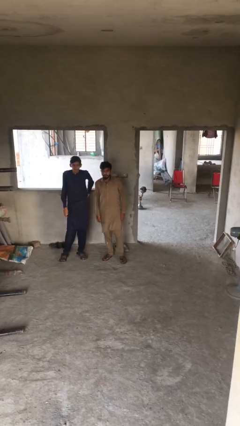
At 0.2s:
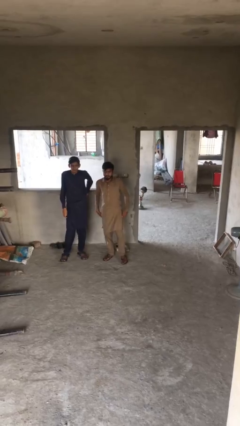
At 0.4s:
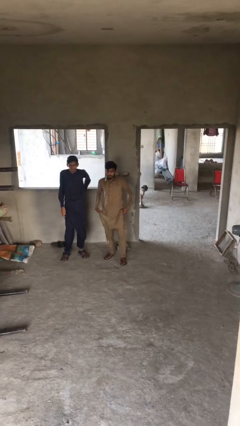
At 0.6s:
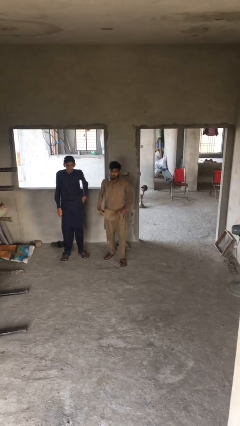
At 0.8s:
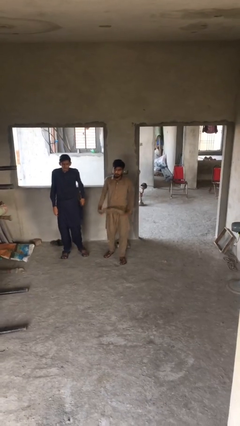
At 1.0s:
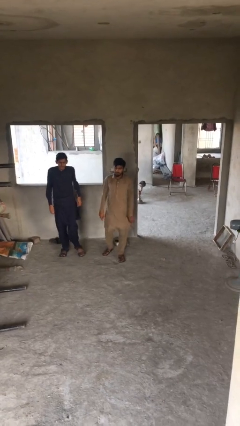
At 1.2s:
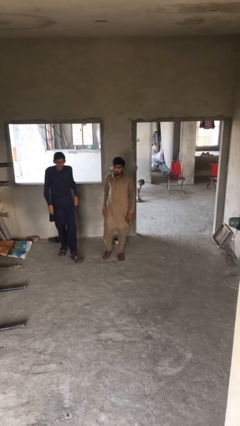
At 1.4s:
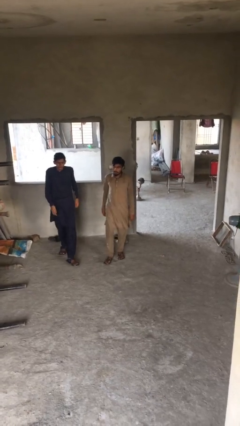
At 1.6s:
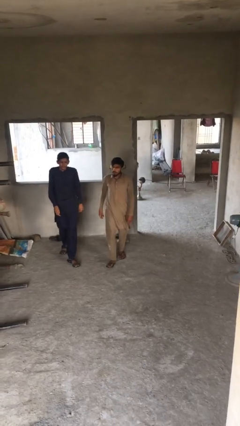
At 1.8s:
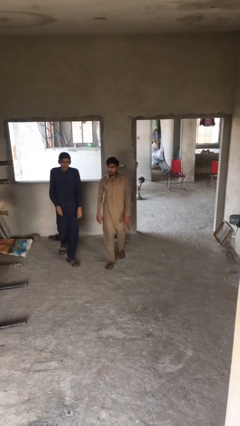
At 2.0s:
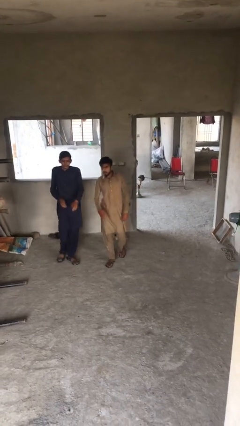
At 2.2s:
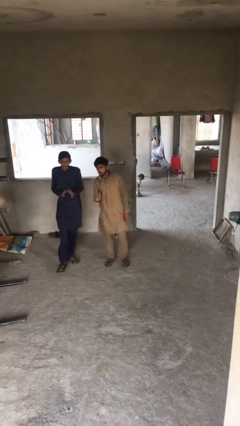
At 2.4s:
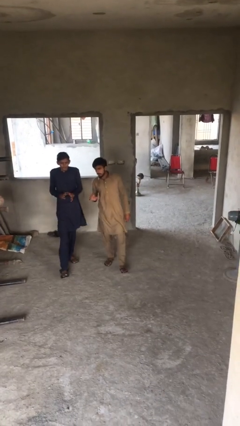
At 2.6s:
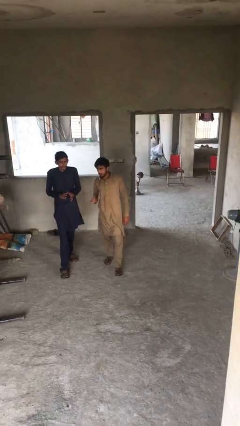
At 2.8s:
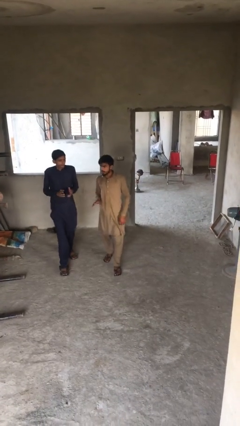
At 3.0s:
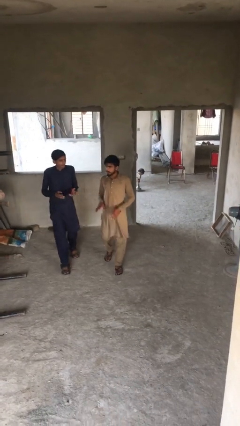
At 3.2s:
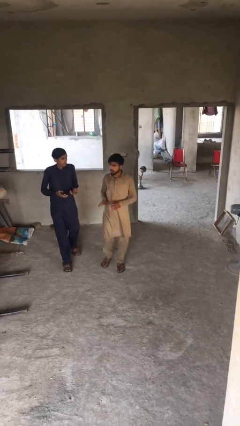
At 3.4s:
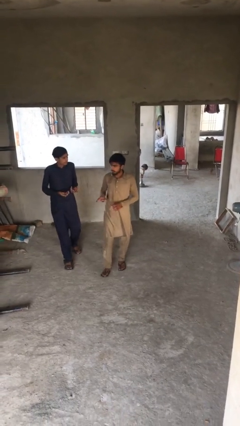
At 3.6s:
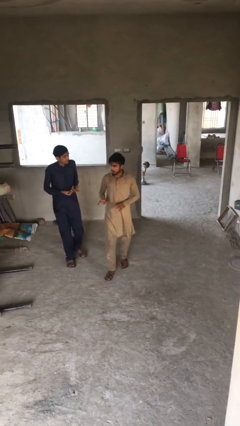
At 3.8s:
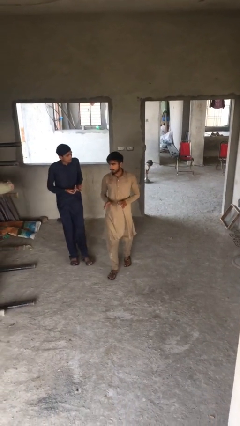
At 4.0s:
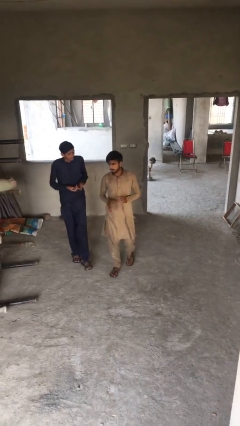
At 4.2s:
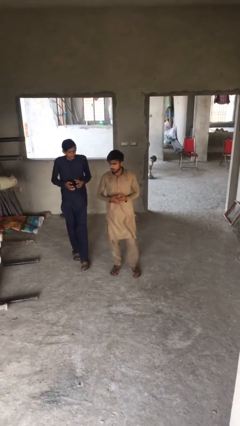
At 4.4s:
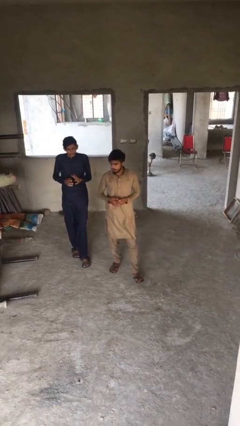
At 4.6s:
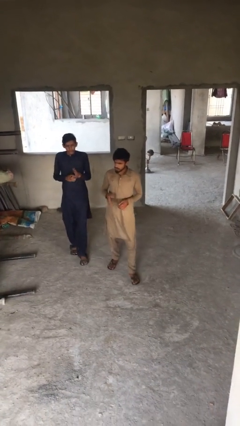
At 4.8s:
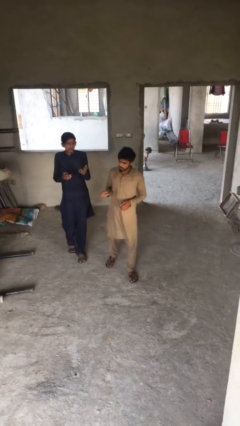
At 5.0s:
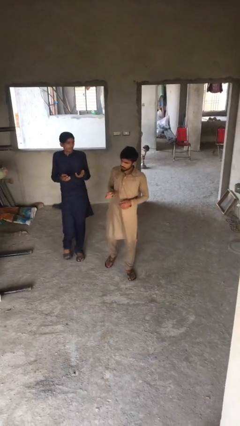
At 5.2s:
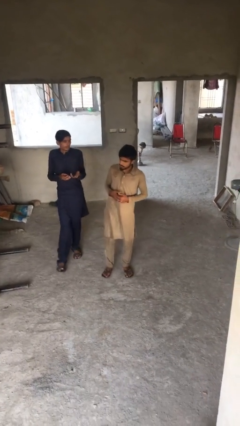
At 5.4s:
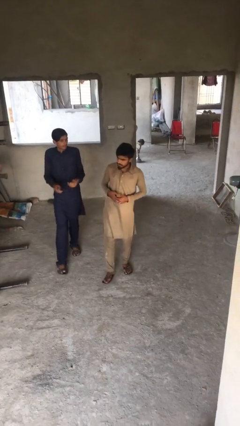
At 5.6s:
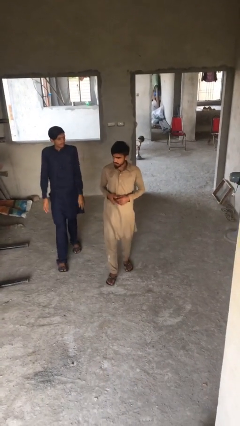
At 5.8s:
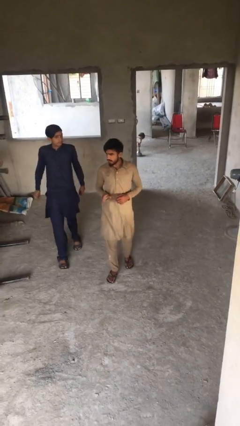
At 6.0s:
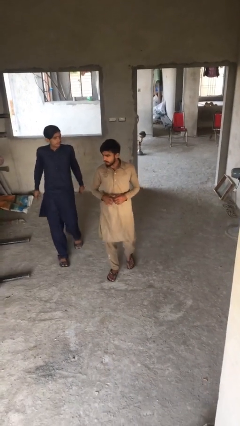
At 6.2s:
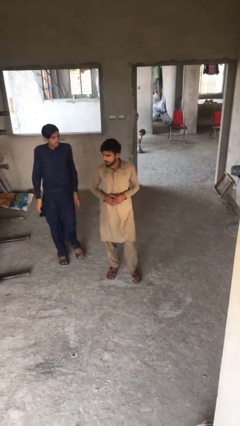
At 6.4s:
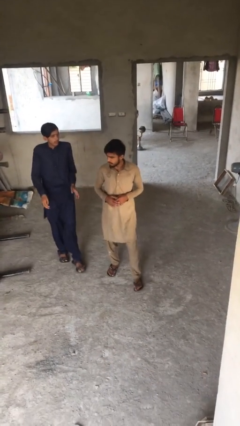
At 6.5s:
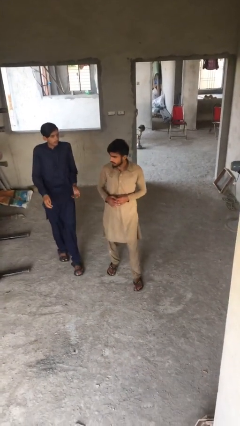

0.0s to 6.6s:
person talks to person

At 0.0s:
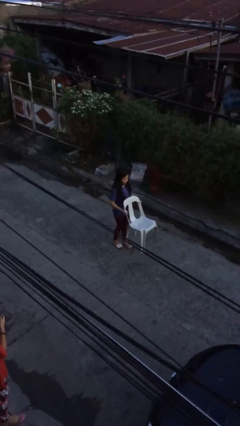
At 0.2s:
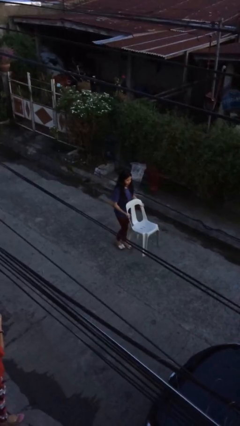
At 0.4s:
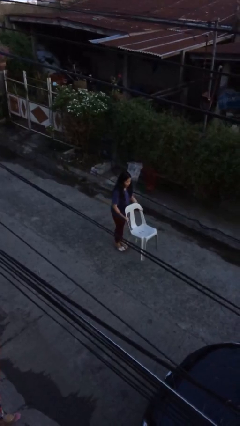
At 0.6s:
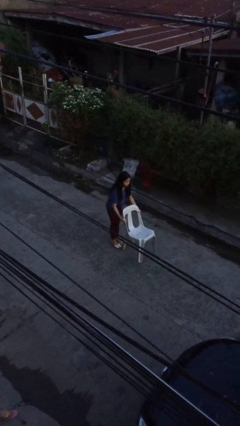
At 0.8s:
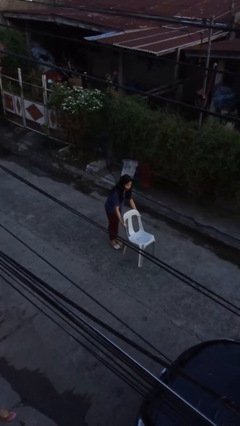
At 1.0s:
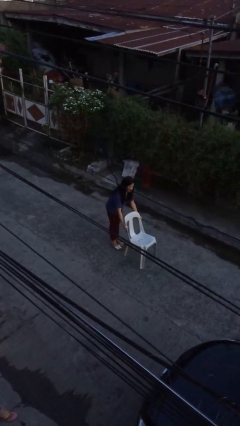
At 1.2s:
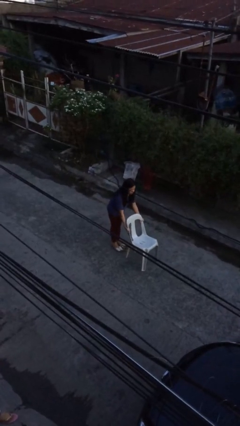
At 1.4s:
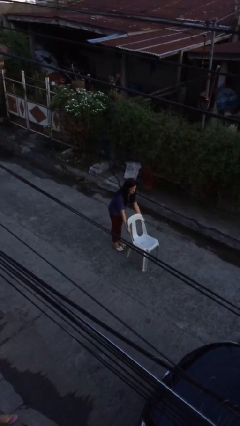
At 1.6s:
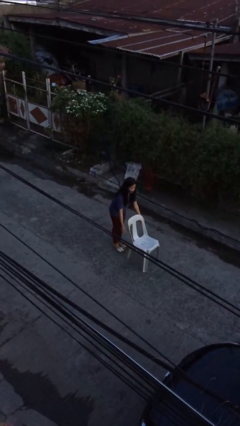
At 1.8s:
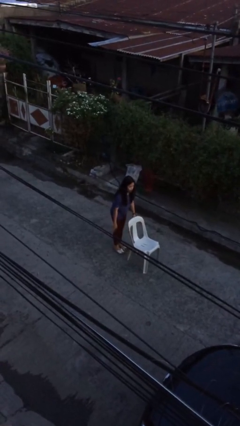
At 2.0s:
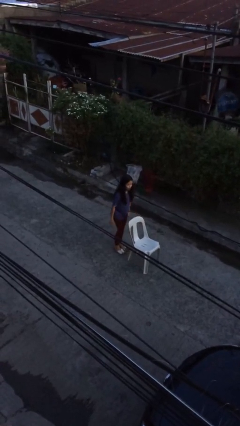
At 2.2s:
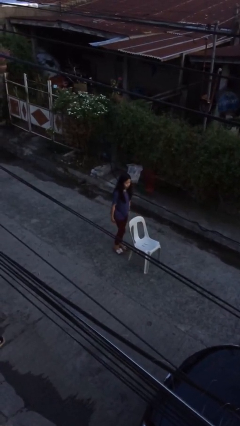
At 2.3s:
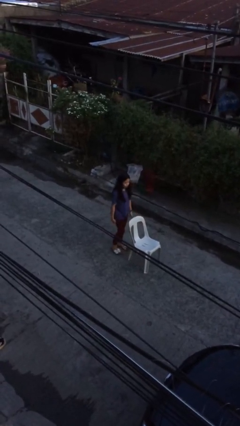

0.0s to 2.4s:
person puts down object on floor

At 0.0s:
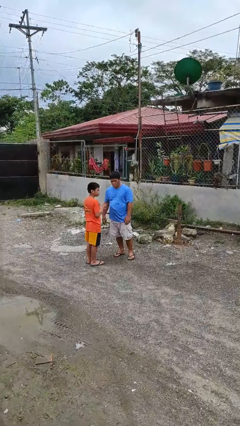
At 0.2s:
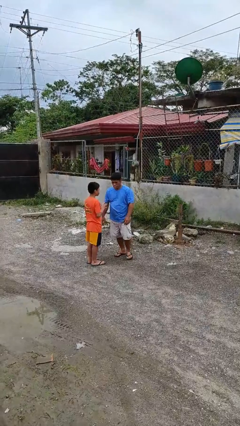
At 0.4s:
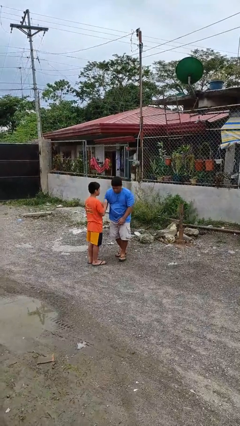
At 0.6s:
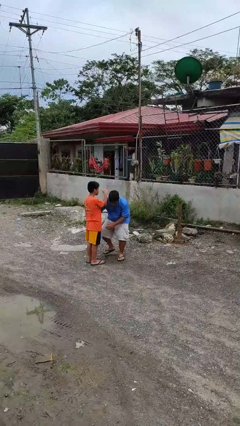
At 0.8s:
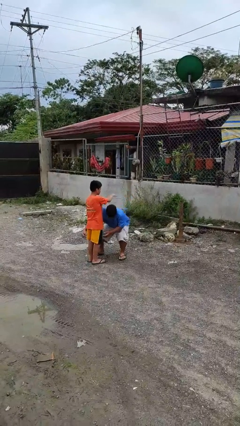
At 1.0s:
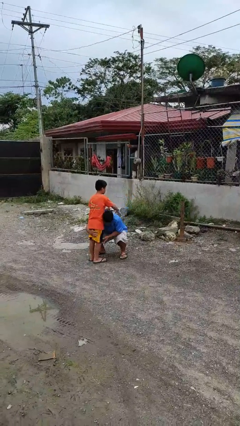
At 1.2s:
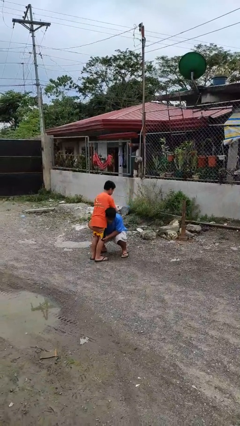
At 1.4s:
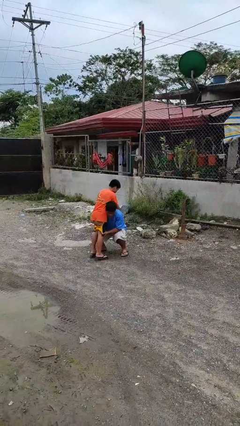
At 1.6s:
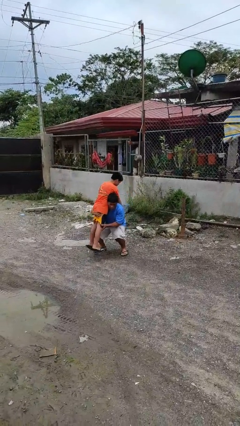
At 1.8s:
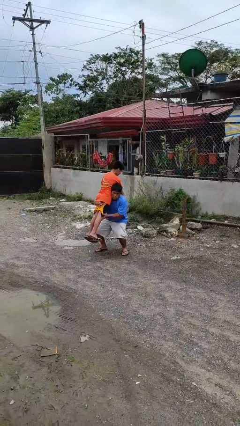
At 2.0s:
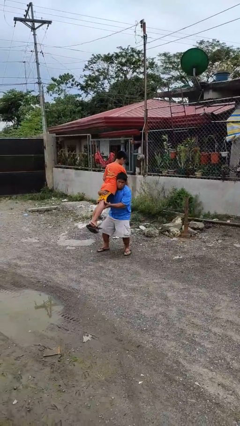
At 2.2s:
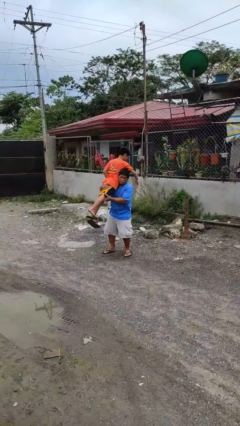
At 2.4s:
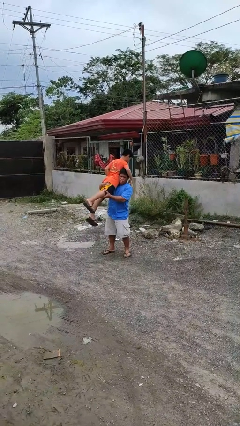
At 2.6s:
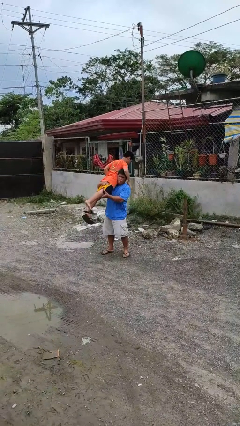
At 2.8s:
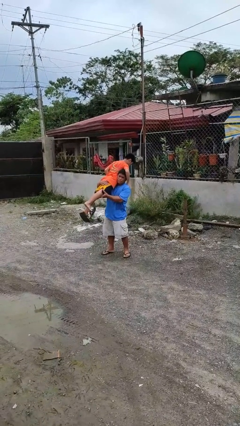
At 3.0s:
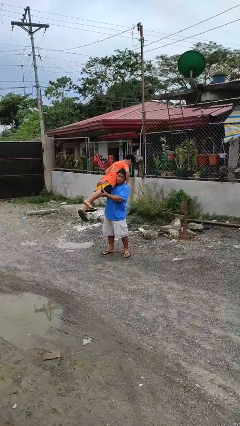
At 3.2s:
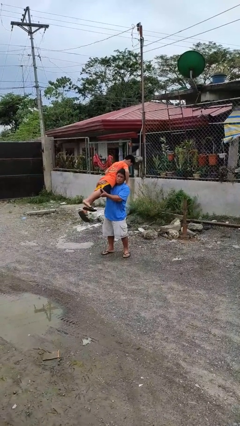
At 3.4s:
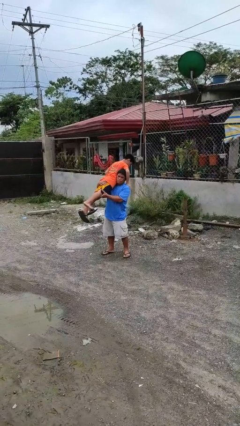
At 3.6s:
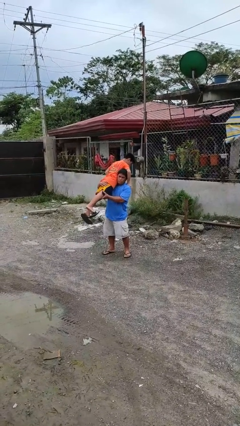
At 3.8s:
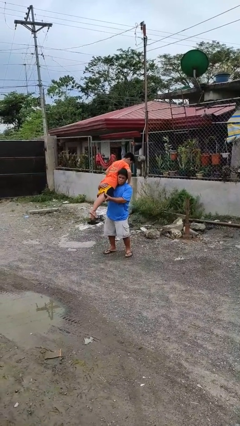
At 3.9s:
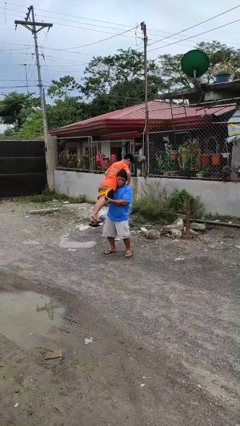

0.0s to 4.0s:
person carries person over shoulder

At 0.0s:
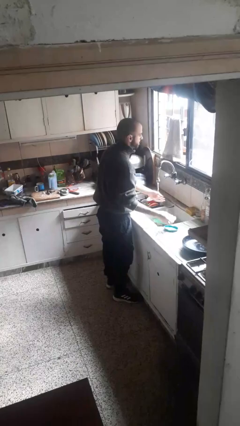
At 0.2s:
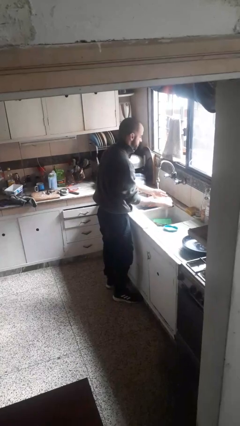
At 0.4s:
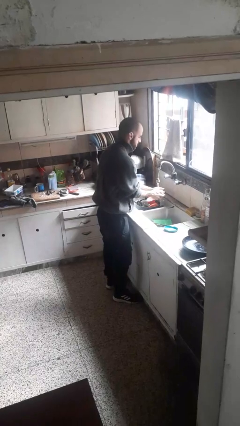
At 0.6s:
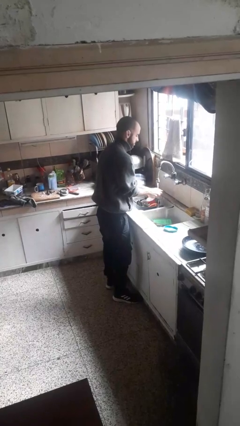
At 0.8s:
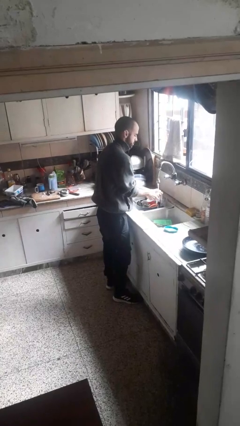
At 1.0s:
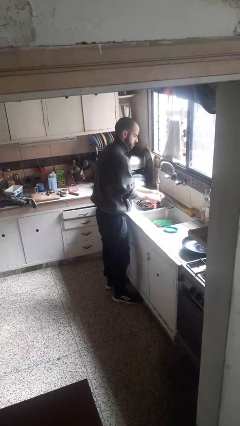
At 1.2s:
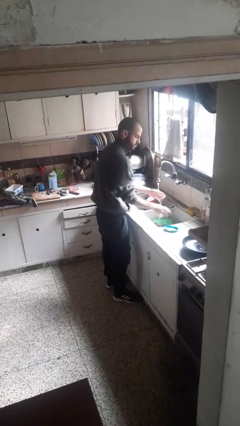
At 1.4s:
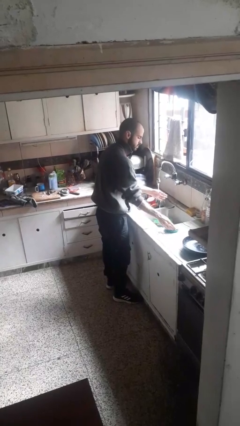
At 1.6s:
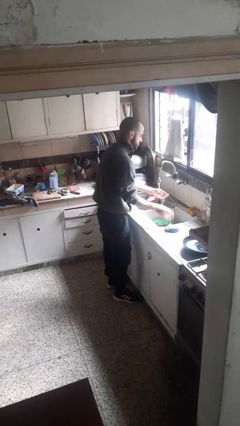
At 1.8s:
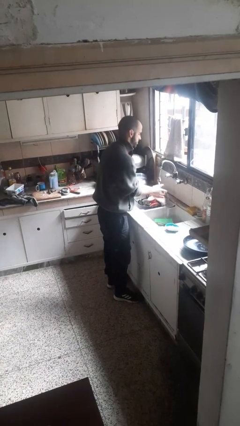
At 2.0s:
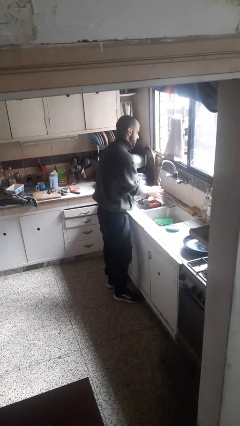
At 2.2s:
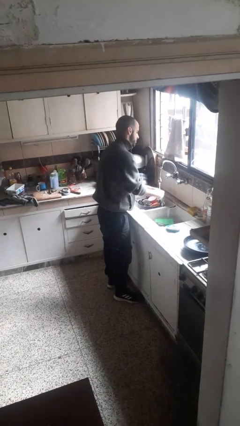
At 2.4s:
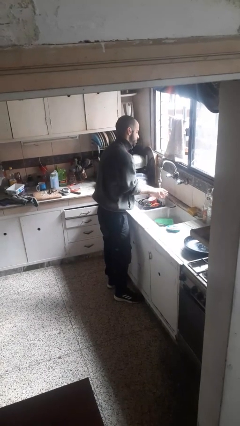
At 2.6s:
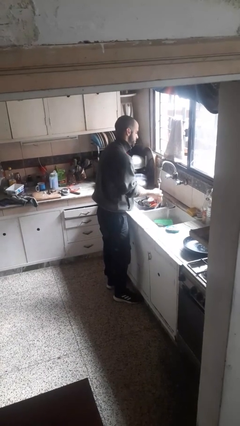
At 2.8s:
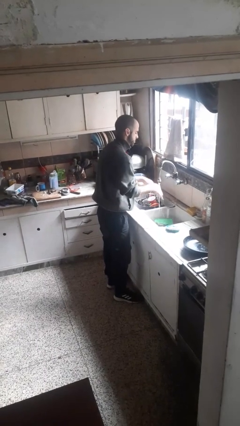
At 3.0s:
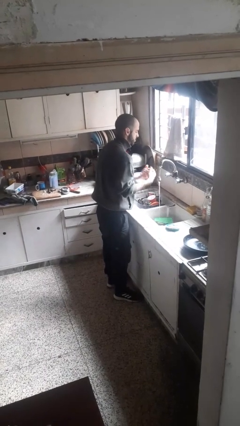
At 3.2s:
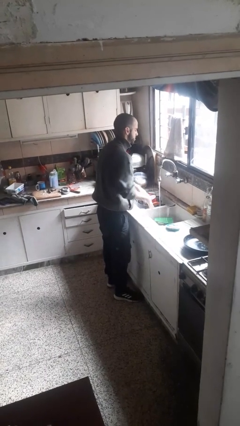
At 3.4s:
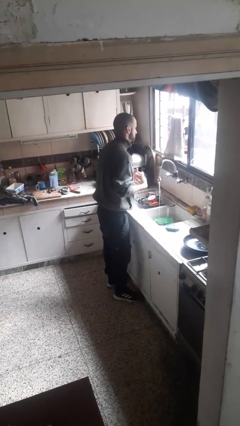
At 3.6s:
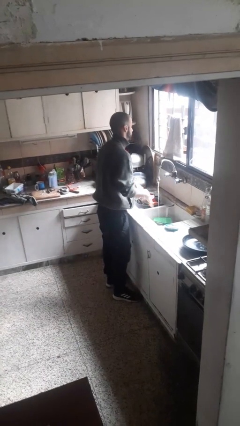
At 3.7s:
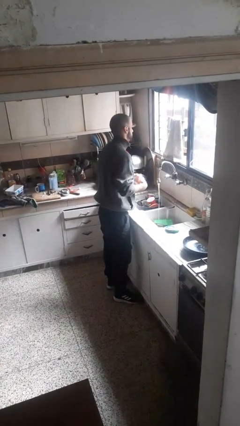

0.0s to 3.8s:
person washes hands

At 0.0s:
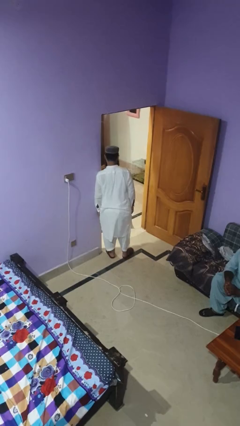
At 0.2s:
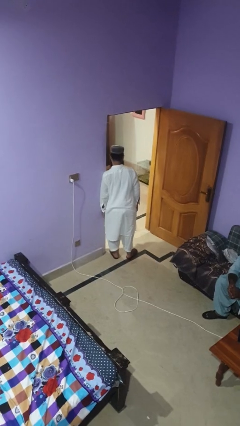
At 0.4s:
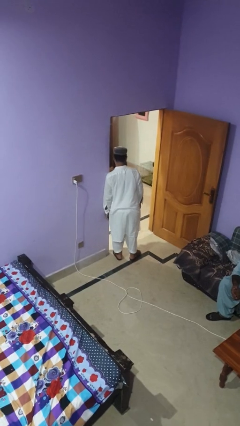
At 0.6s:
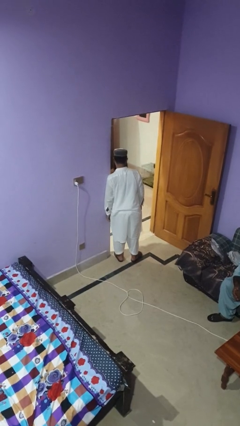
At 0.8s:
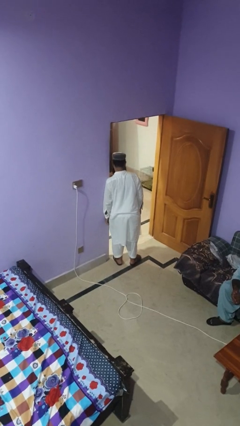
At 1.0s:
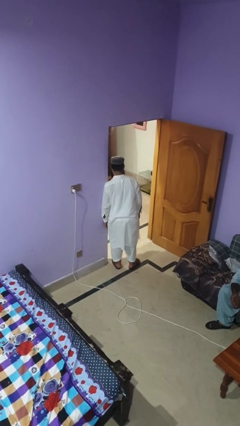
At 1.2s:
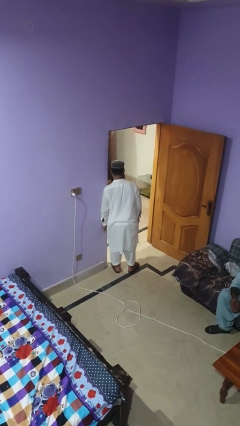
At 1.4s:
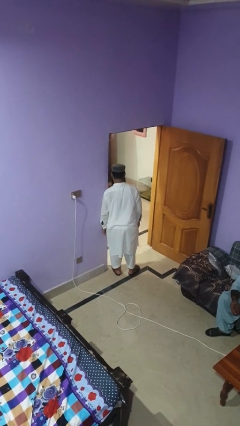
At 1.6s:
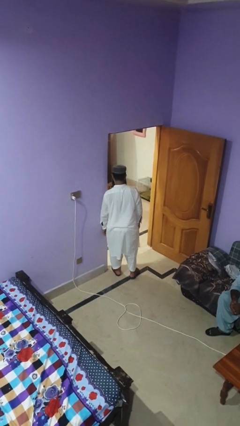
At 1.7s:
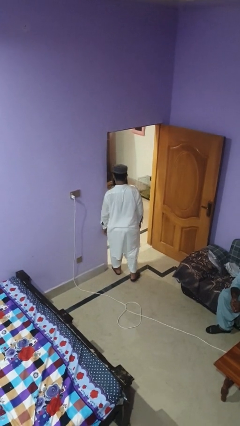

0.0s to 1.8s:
person bumps into wall
